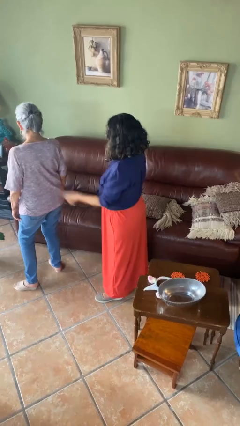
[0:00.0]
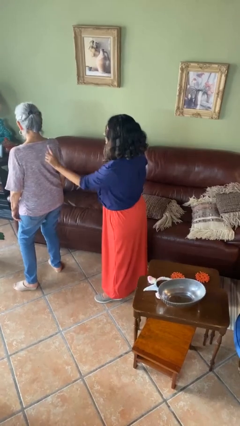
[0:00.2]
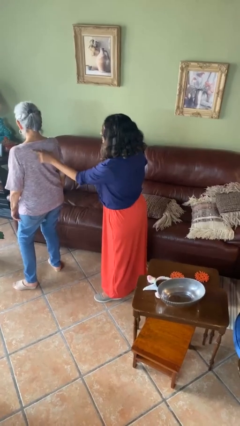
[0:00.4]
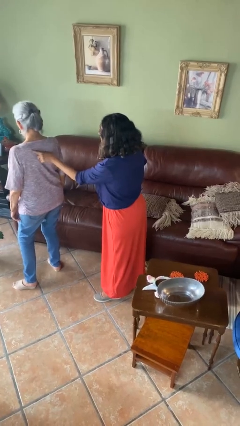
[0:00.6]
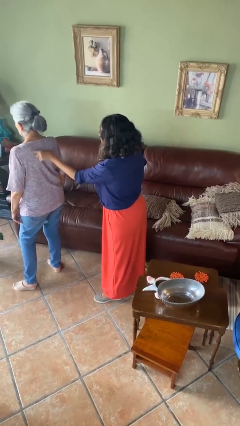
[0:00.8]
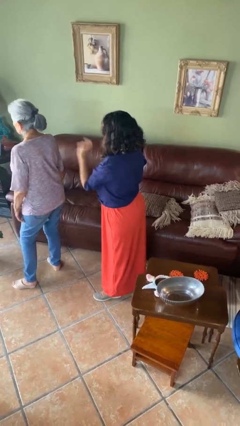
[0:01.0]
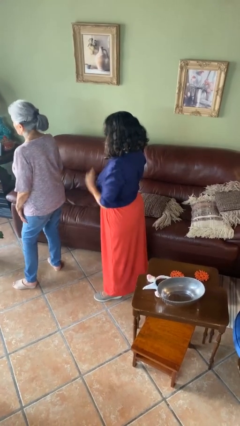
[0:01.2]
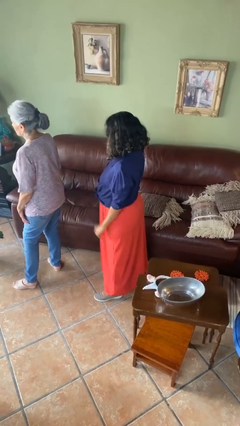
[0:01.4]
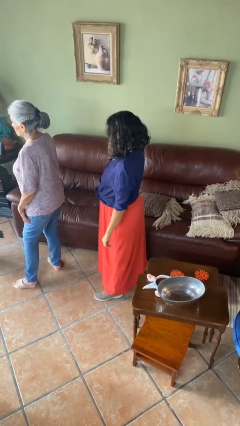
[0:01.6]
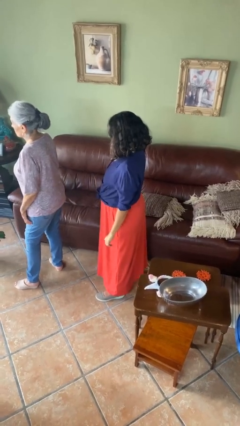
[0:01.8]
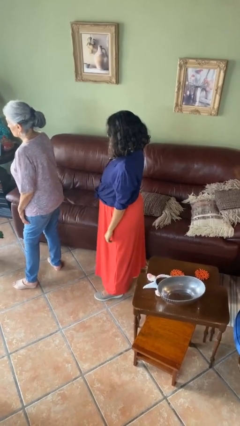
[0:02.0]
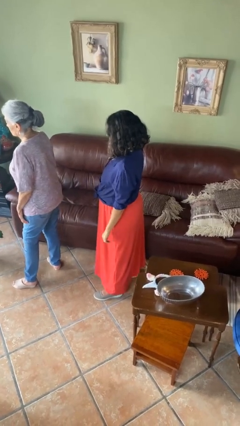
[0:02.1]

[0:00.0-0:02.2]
person touches back of person

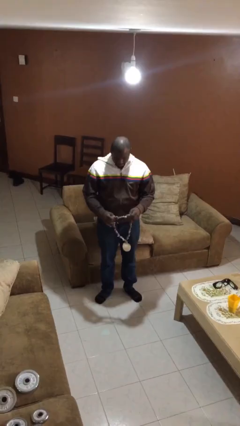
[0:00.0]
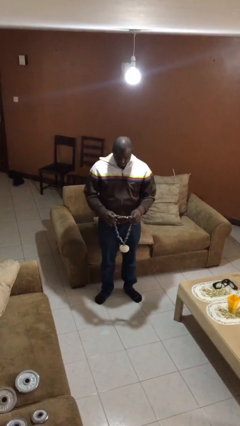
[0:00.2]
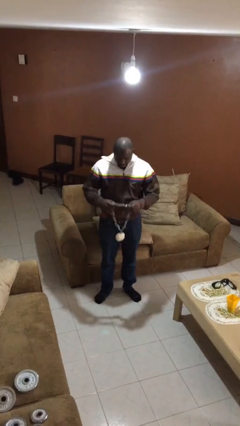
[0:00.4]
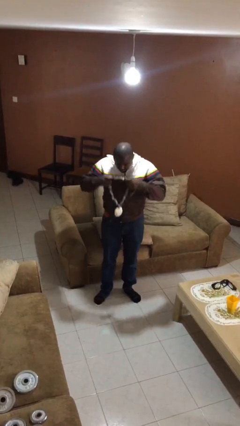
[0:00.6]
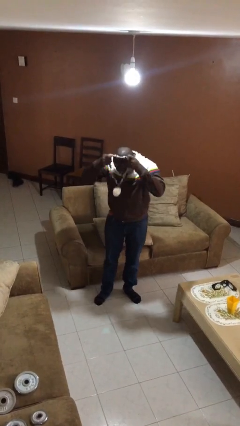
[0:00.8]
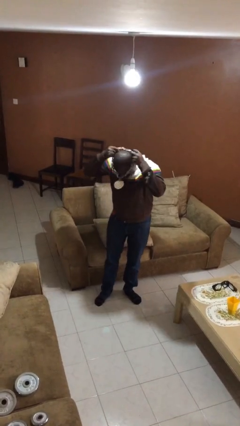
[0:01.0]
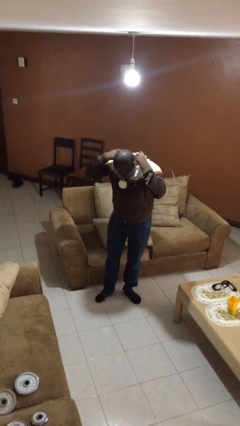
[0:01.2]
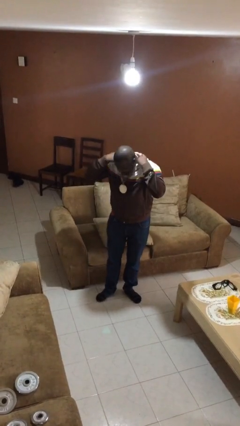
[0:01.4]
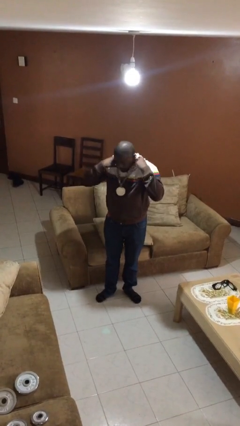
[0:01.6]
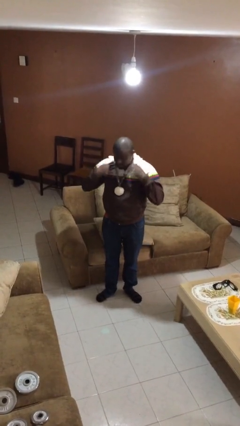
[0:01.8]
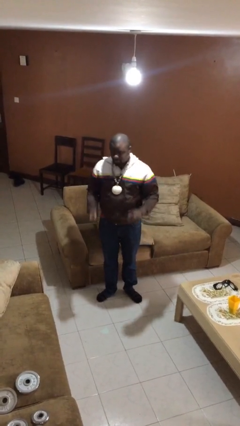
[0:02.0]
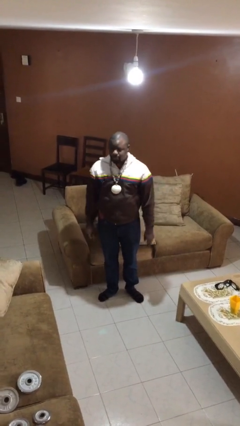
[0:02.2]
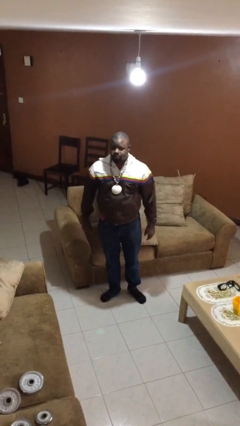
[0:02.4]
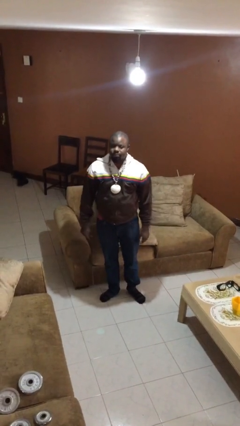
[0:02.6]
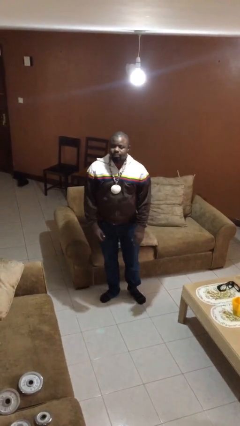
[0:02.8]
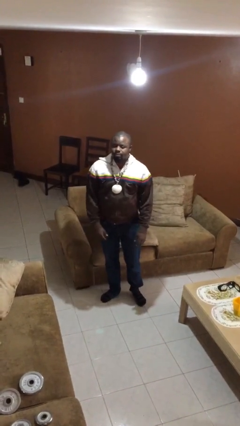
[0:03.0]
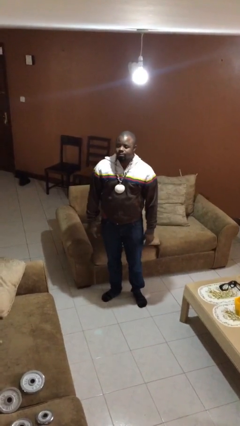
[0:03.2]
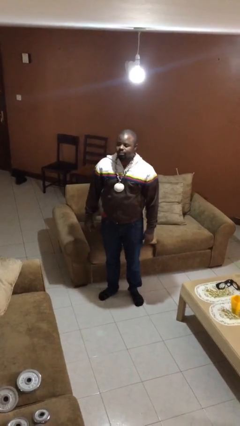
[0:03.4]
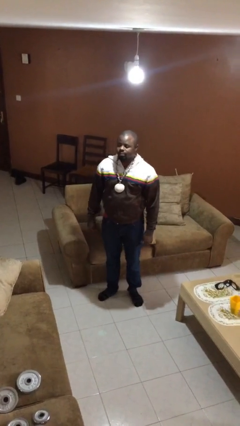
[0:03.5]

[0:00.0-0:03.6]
person puts on necklace

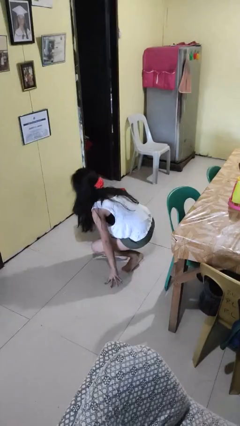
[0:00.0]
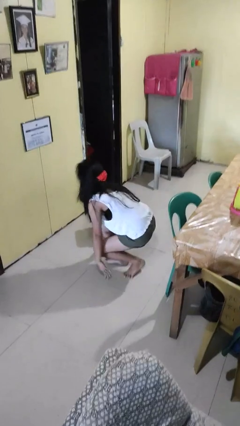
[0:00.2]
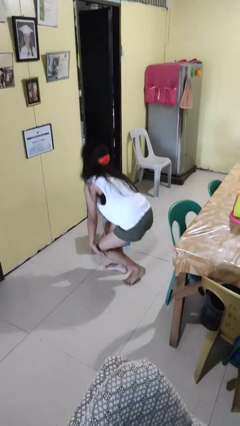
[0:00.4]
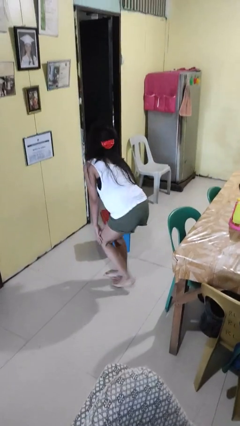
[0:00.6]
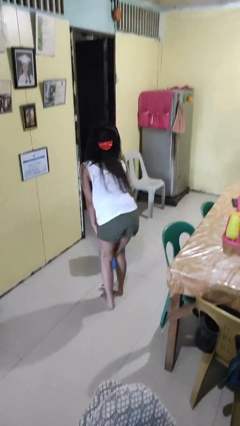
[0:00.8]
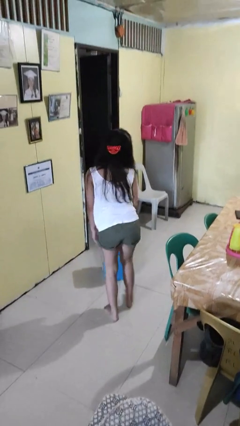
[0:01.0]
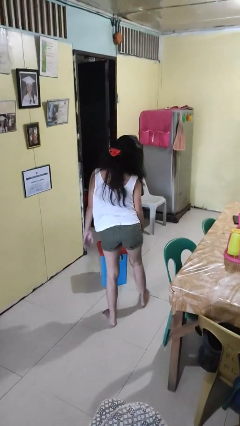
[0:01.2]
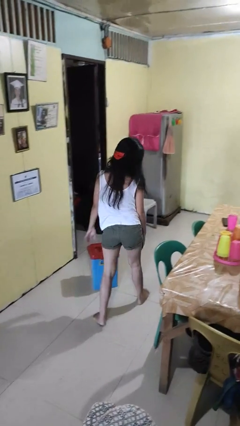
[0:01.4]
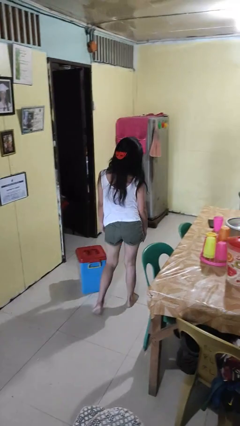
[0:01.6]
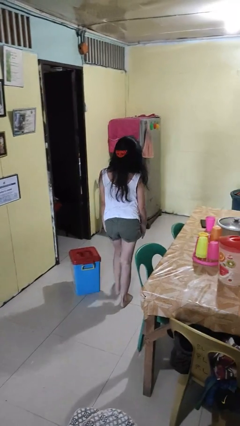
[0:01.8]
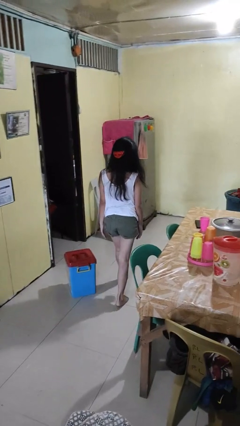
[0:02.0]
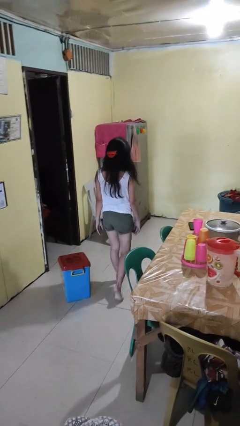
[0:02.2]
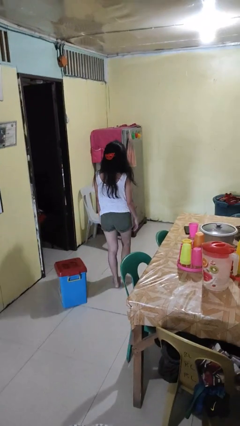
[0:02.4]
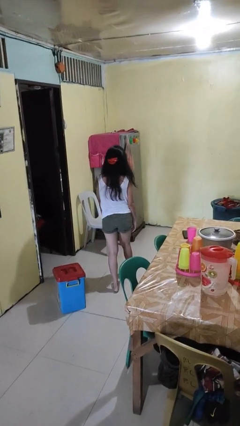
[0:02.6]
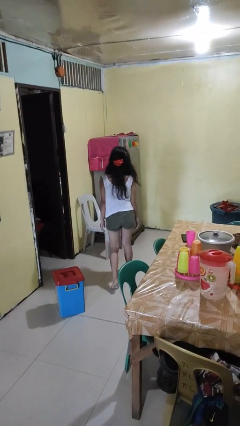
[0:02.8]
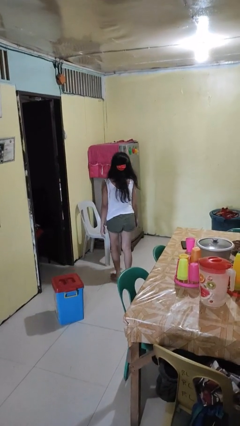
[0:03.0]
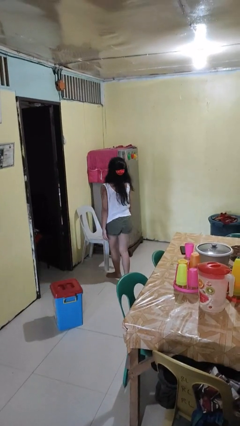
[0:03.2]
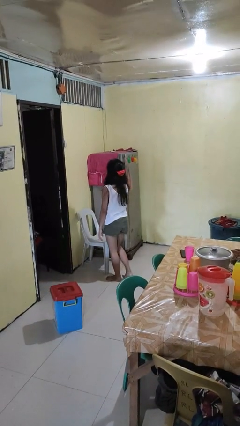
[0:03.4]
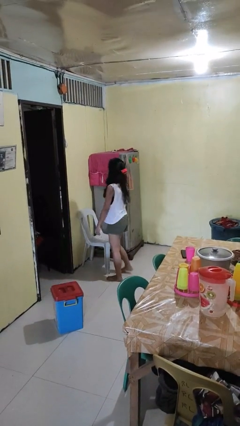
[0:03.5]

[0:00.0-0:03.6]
person stands up from floor

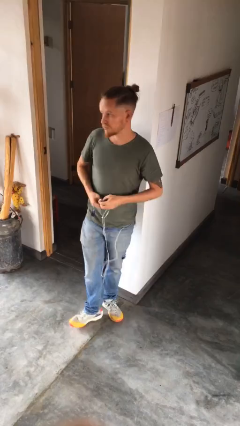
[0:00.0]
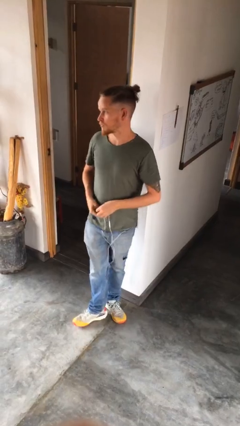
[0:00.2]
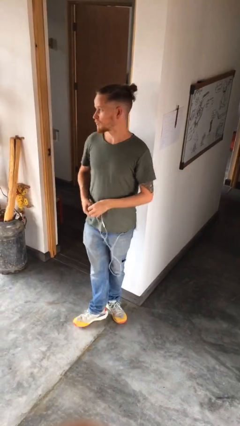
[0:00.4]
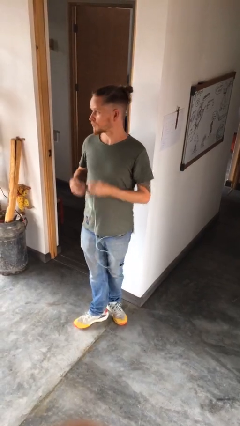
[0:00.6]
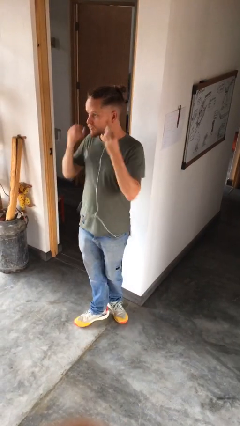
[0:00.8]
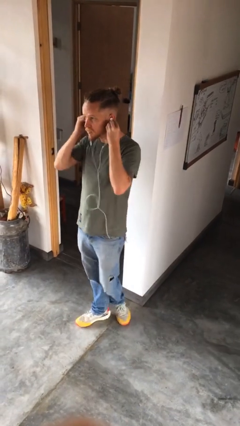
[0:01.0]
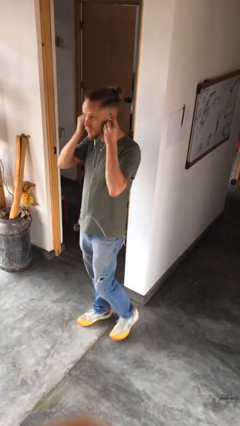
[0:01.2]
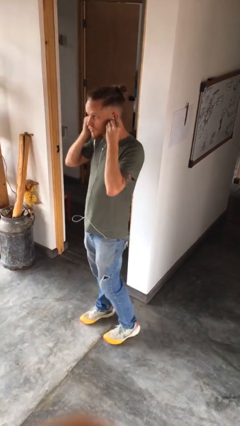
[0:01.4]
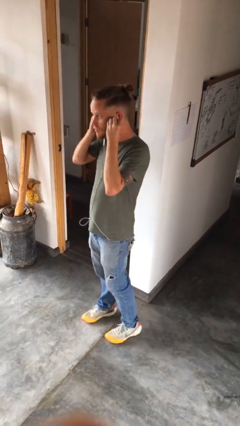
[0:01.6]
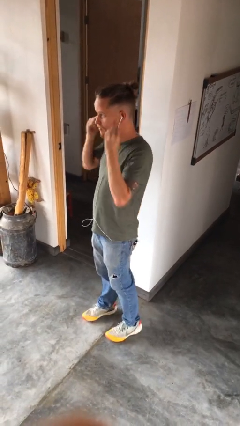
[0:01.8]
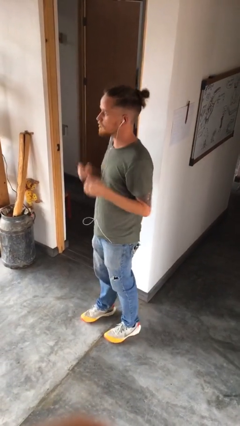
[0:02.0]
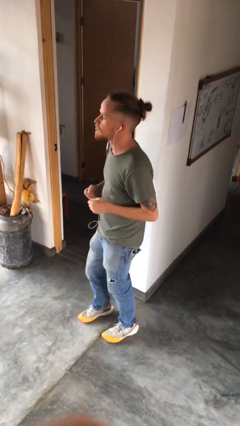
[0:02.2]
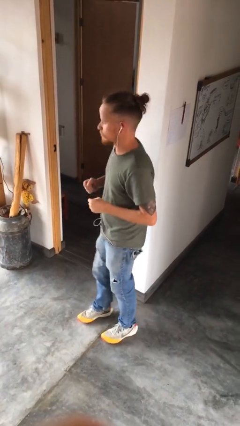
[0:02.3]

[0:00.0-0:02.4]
person puts on headphones

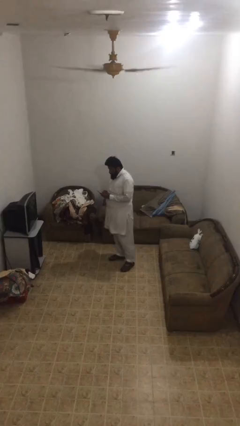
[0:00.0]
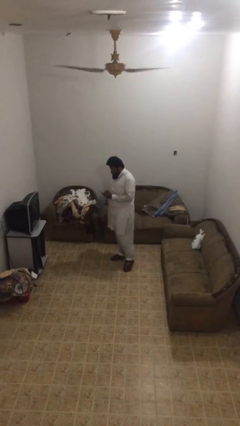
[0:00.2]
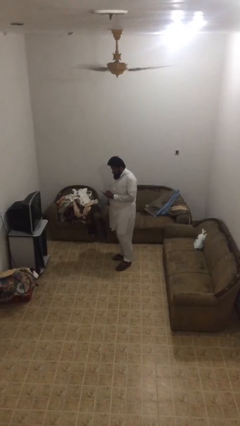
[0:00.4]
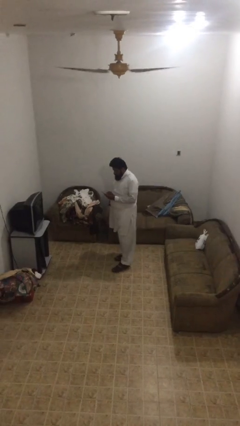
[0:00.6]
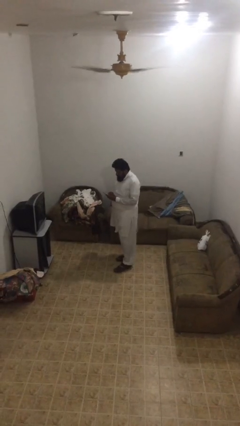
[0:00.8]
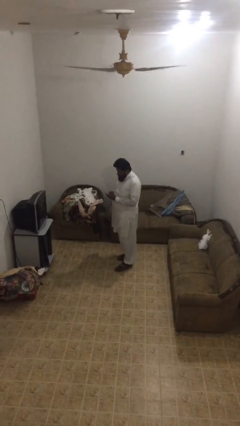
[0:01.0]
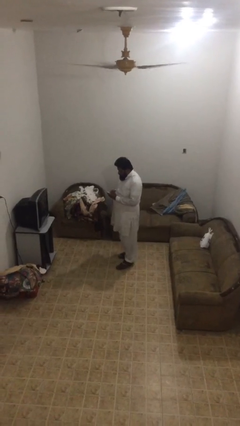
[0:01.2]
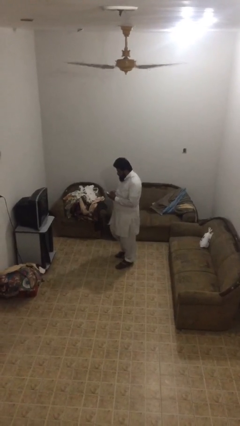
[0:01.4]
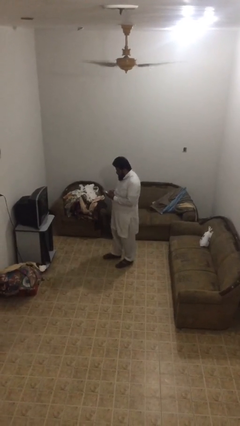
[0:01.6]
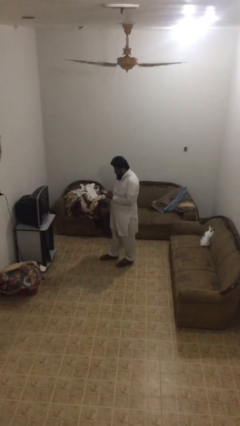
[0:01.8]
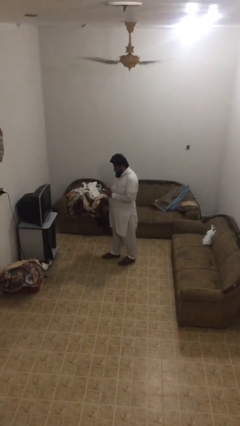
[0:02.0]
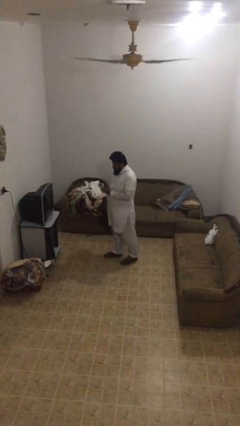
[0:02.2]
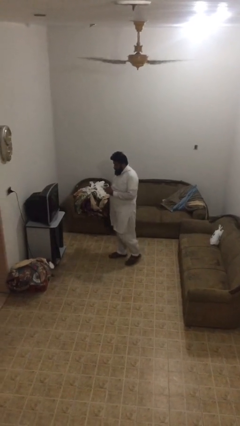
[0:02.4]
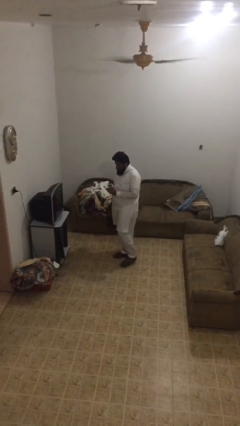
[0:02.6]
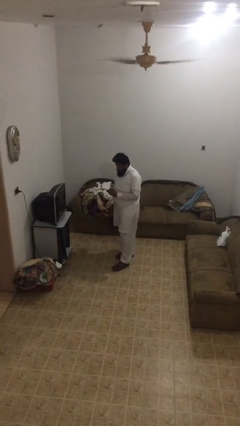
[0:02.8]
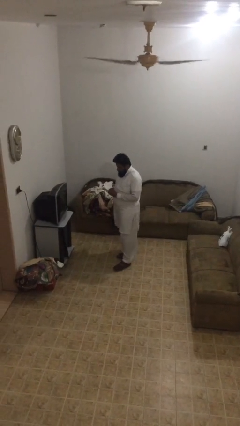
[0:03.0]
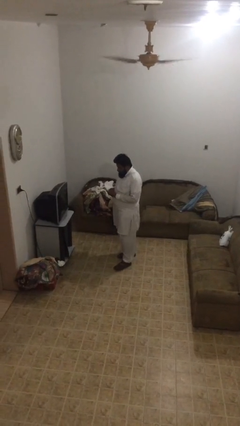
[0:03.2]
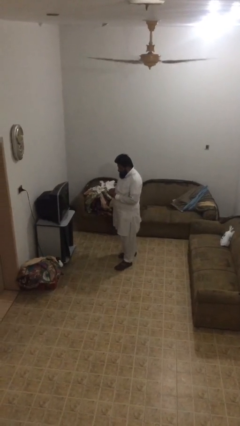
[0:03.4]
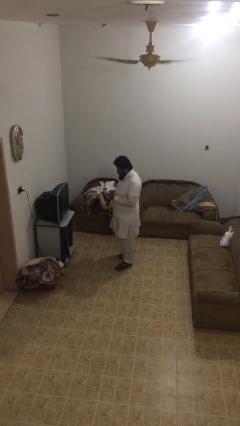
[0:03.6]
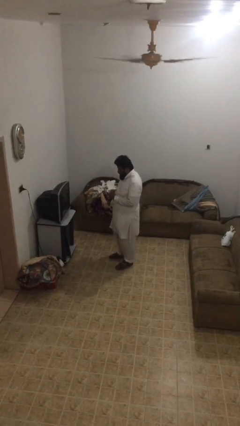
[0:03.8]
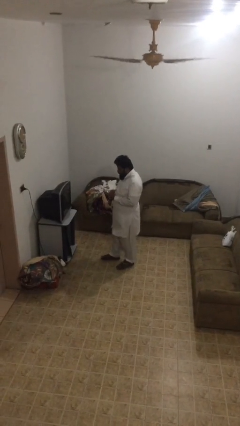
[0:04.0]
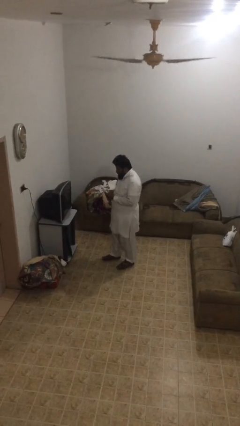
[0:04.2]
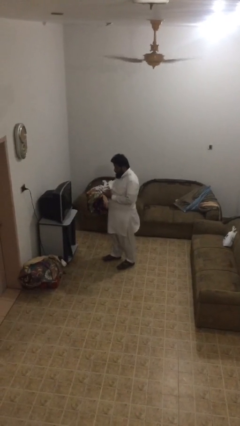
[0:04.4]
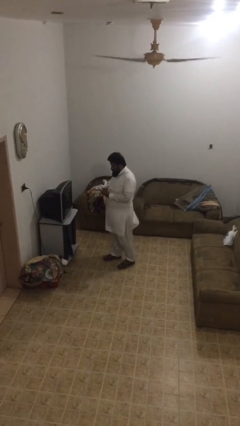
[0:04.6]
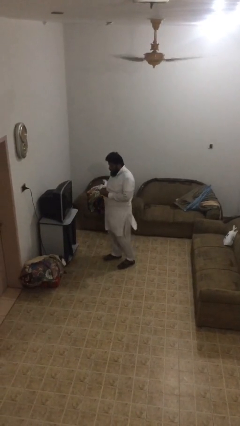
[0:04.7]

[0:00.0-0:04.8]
person texts on phone

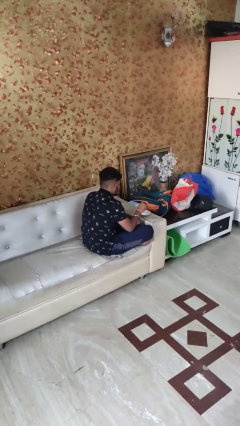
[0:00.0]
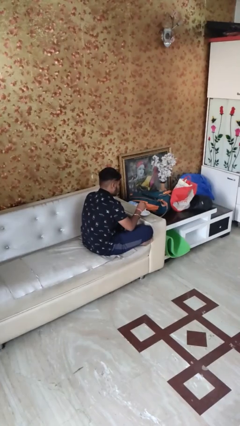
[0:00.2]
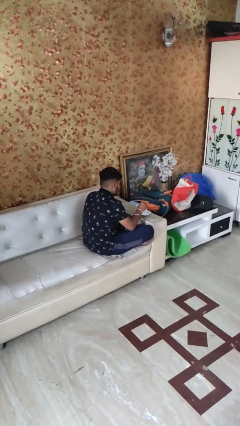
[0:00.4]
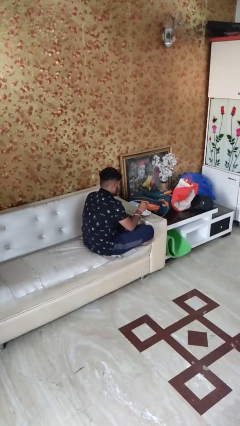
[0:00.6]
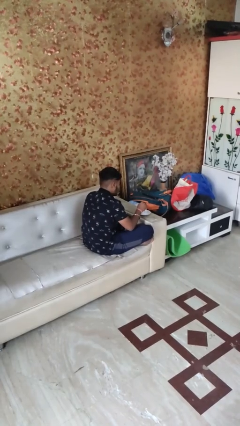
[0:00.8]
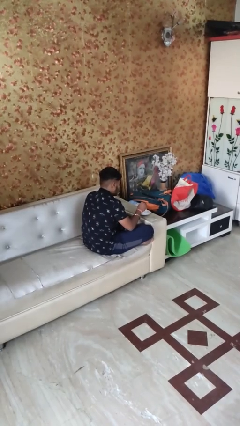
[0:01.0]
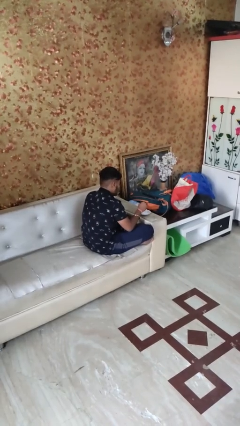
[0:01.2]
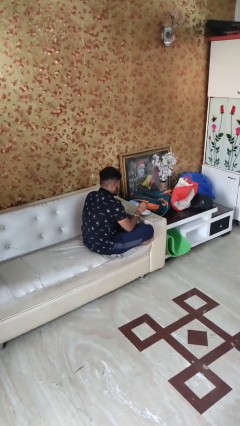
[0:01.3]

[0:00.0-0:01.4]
person stirs mug
